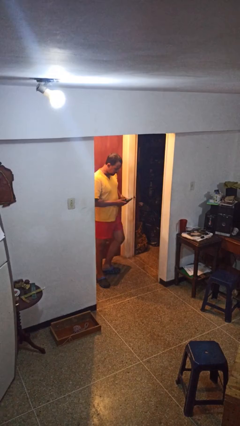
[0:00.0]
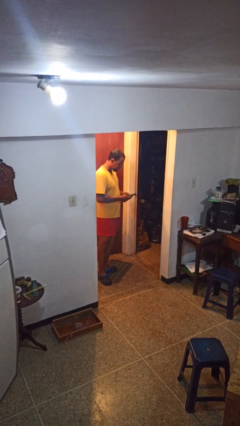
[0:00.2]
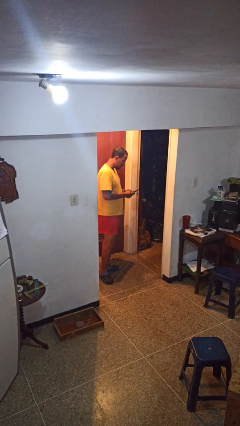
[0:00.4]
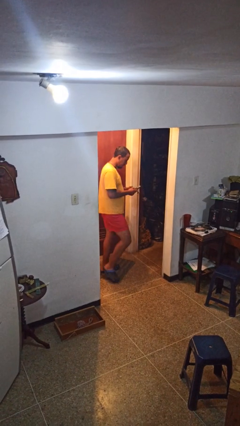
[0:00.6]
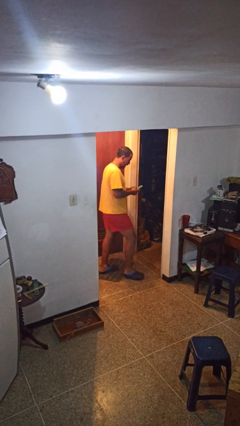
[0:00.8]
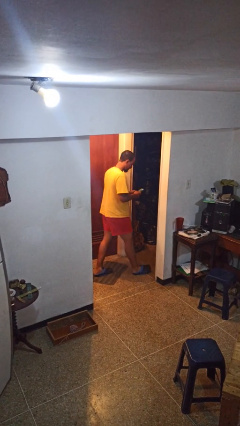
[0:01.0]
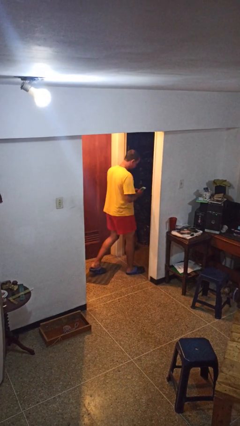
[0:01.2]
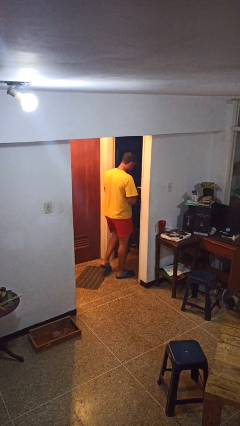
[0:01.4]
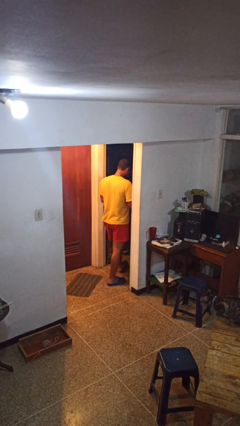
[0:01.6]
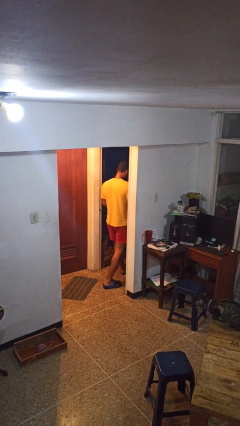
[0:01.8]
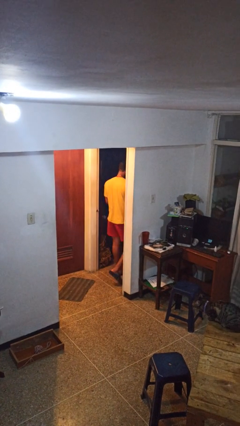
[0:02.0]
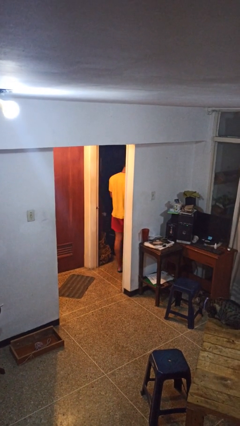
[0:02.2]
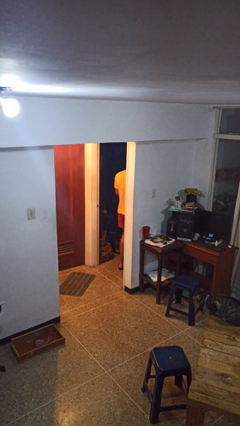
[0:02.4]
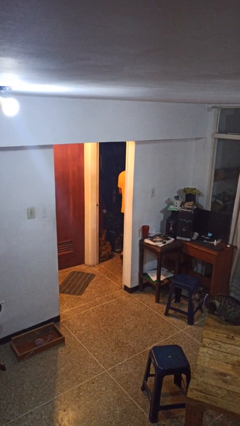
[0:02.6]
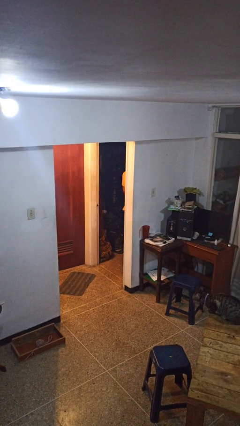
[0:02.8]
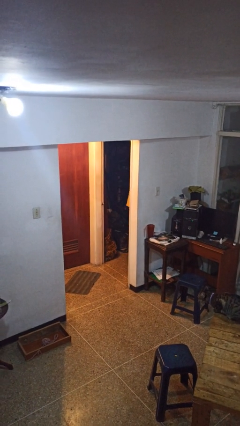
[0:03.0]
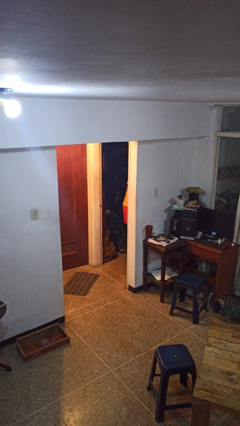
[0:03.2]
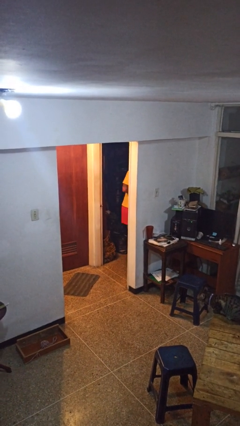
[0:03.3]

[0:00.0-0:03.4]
person exits scene through structure

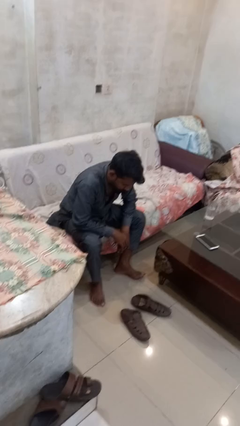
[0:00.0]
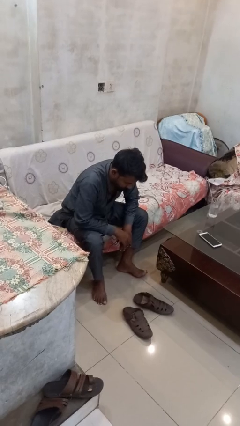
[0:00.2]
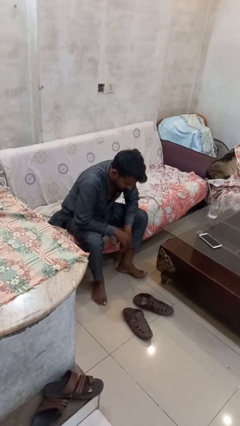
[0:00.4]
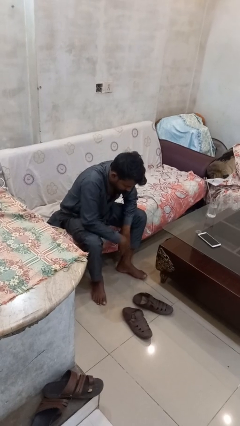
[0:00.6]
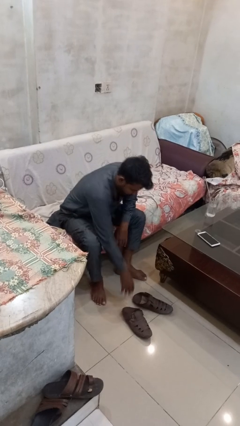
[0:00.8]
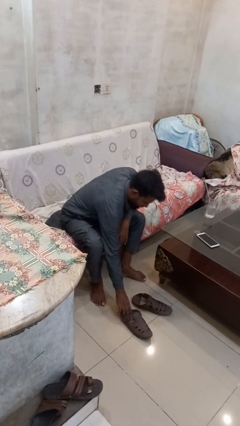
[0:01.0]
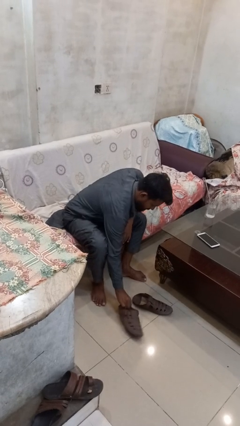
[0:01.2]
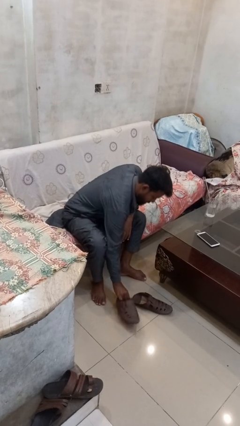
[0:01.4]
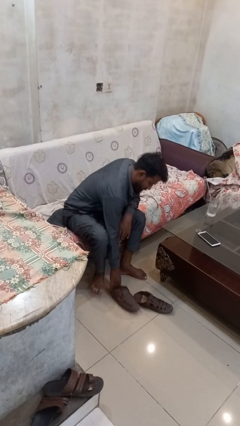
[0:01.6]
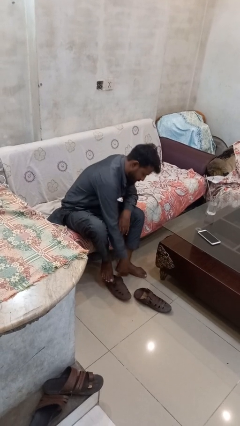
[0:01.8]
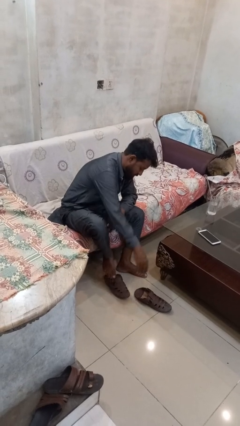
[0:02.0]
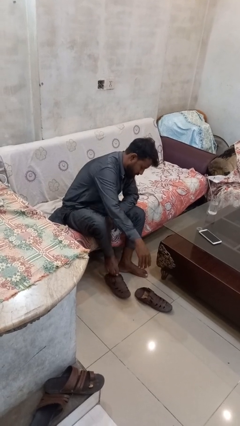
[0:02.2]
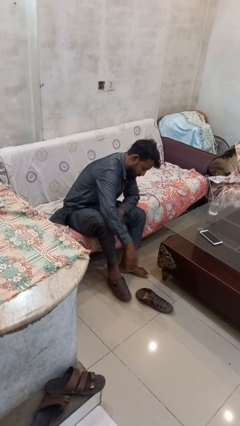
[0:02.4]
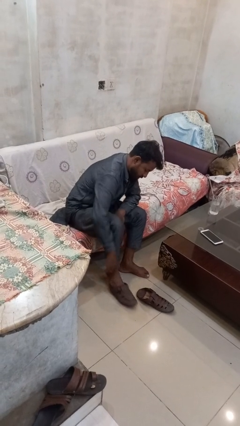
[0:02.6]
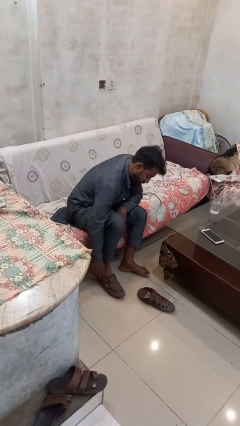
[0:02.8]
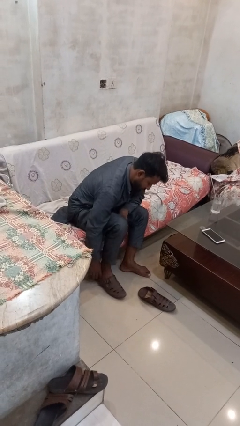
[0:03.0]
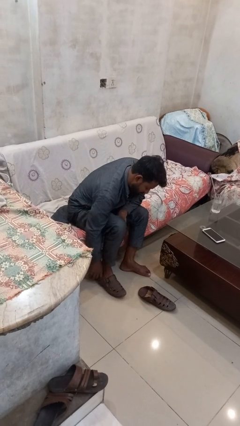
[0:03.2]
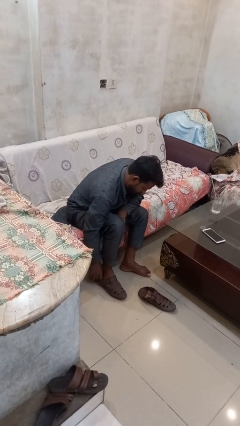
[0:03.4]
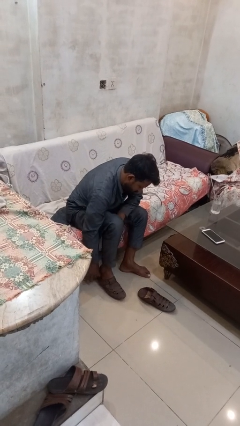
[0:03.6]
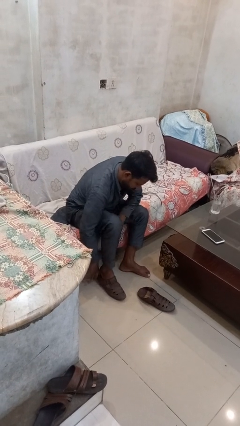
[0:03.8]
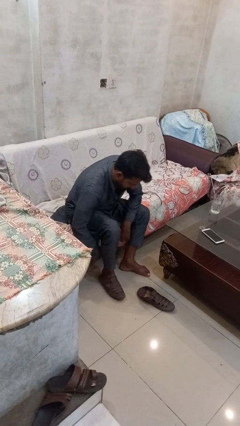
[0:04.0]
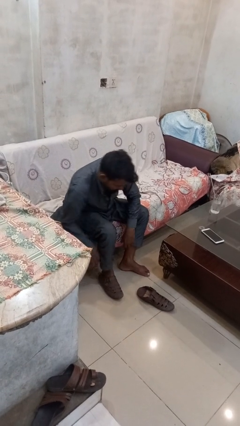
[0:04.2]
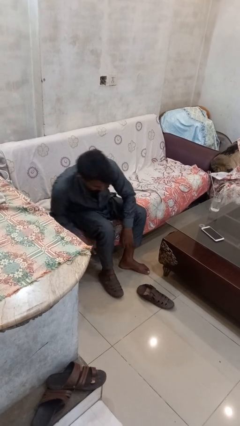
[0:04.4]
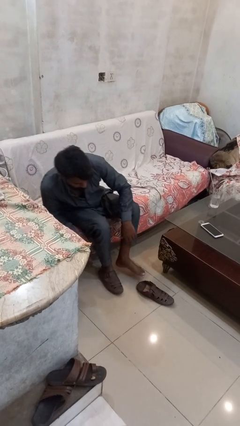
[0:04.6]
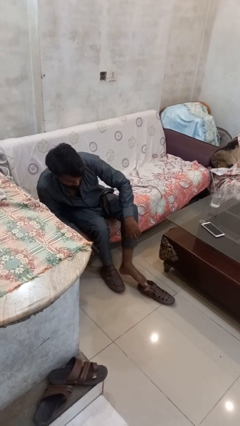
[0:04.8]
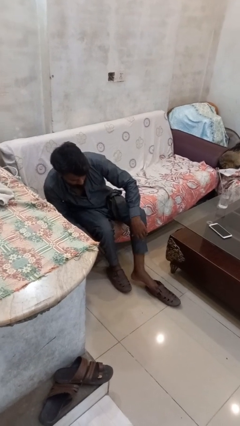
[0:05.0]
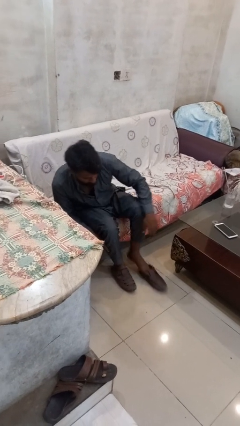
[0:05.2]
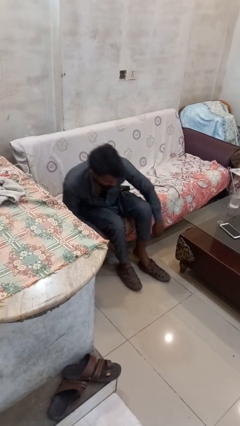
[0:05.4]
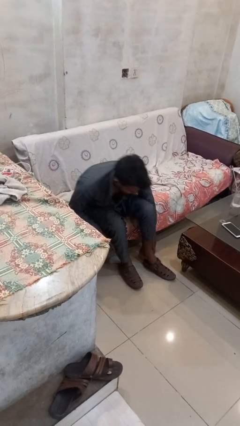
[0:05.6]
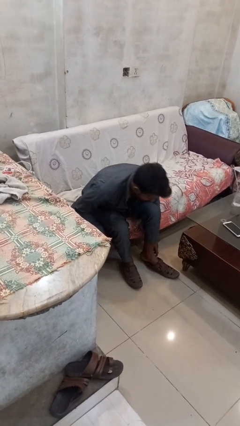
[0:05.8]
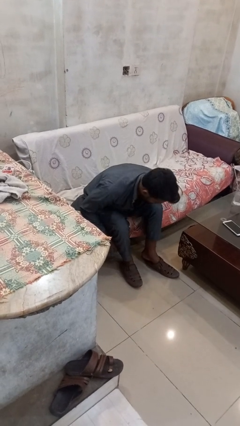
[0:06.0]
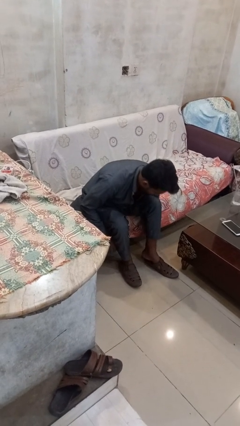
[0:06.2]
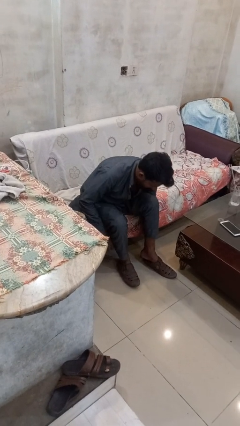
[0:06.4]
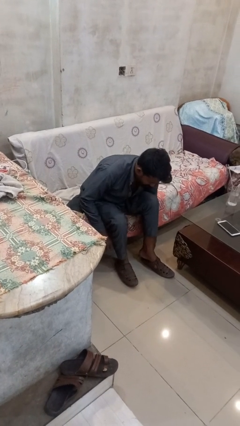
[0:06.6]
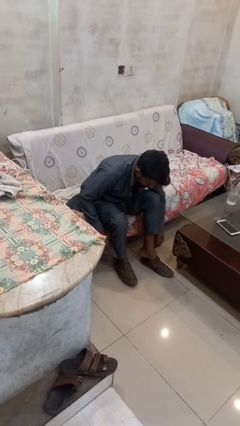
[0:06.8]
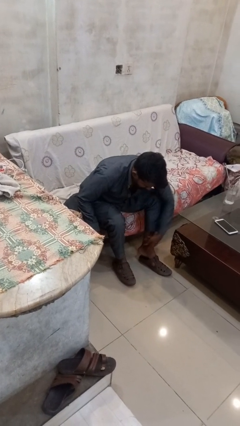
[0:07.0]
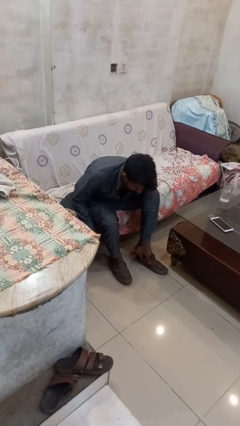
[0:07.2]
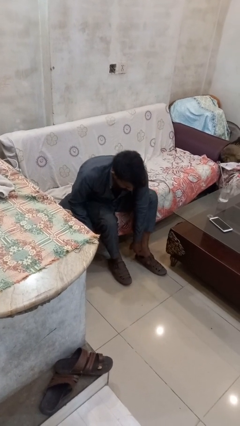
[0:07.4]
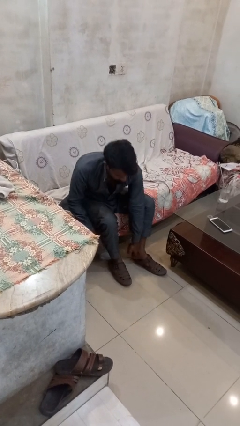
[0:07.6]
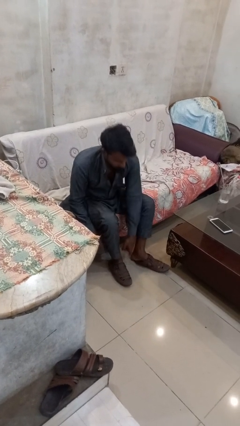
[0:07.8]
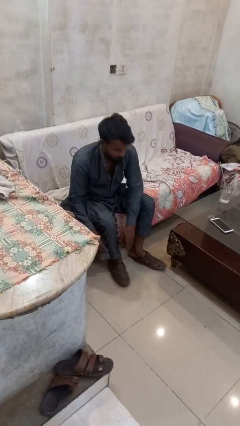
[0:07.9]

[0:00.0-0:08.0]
person puts on shoes

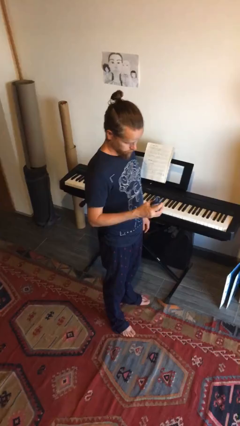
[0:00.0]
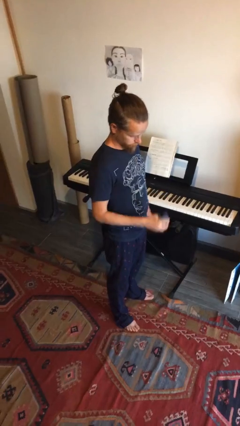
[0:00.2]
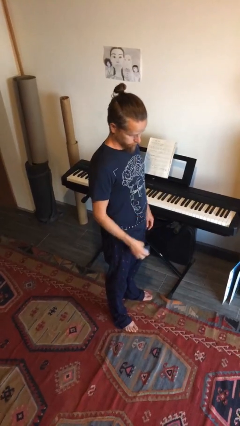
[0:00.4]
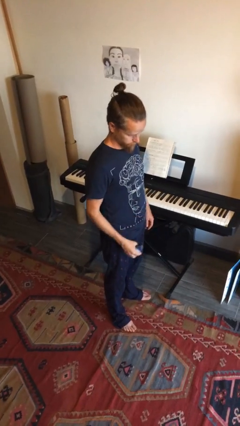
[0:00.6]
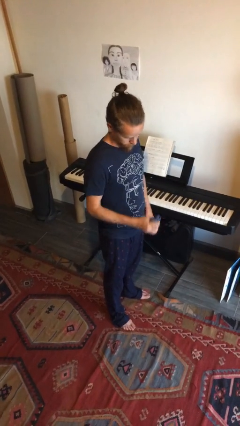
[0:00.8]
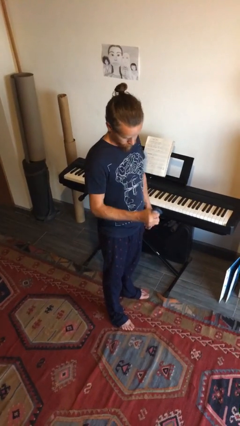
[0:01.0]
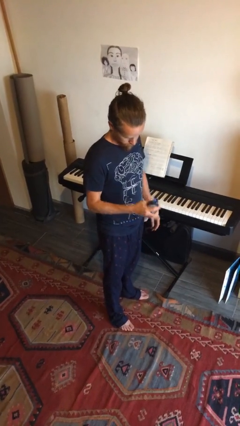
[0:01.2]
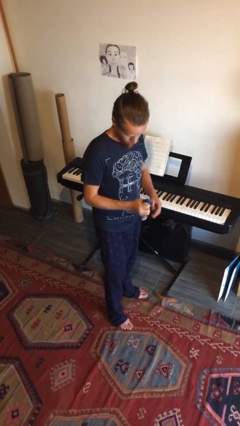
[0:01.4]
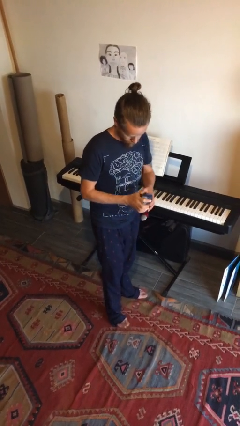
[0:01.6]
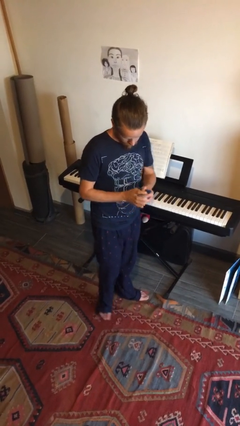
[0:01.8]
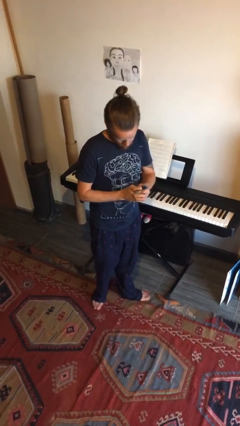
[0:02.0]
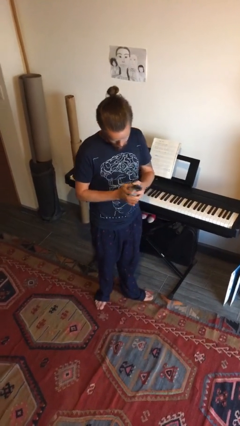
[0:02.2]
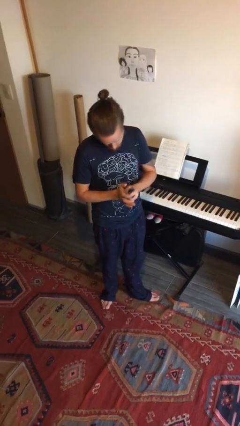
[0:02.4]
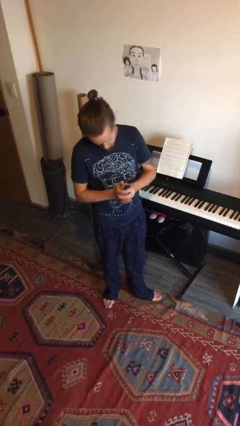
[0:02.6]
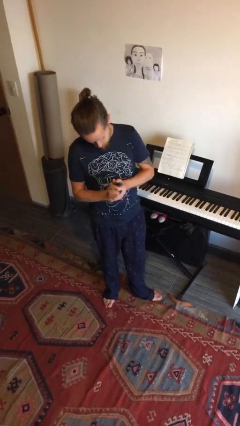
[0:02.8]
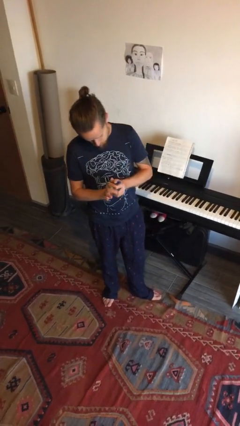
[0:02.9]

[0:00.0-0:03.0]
person squeezes object

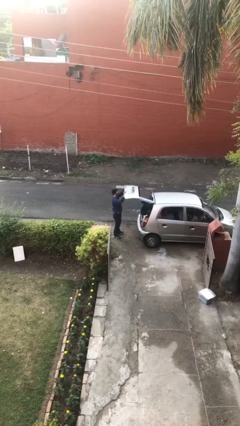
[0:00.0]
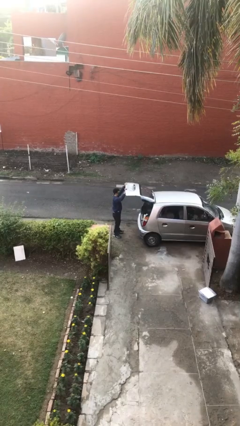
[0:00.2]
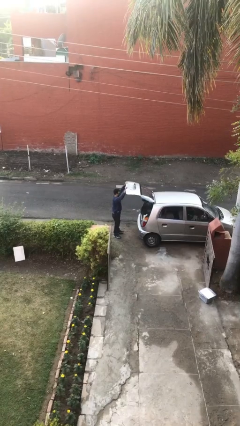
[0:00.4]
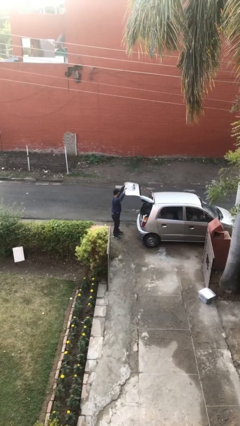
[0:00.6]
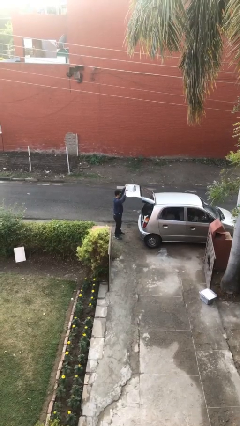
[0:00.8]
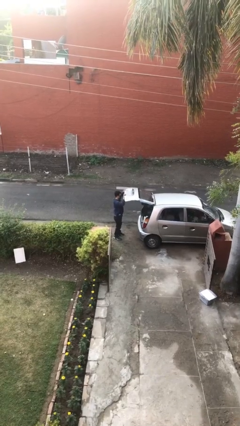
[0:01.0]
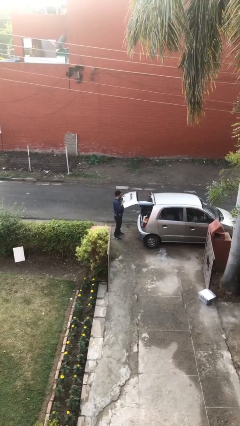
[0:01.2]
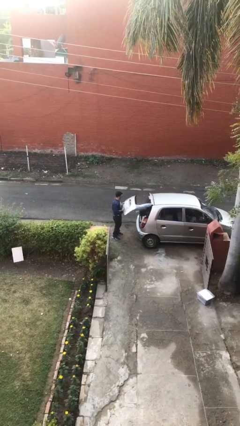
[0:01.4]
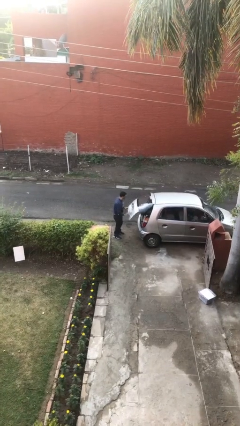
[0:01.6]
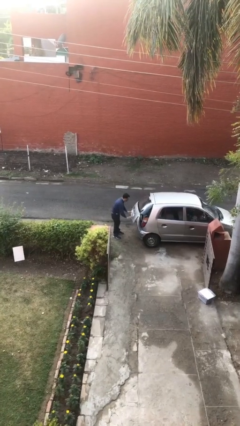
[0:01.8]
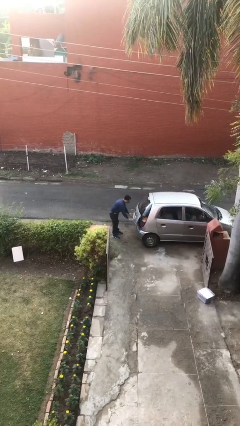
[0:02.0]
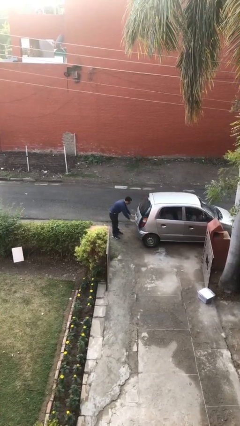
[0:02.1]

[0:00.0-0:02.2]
person closes car trunk

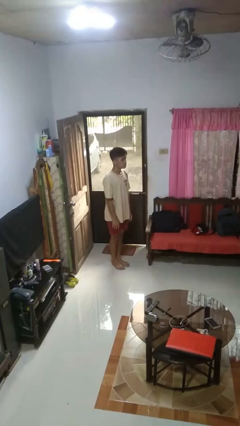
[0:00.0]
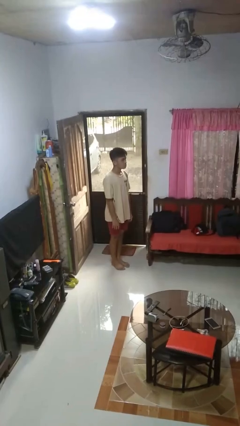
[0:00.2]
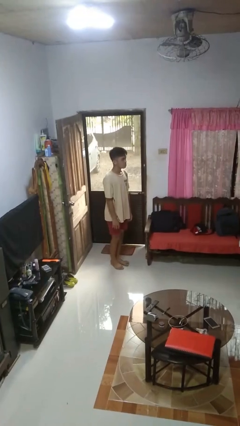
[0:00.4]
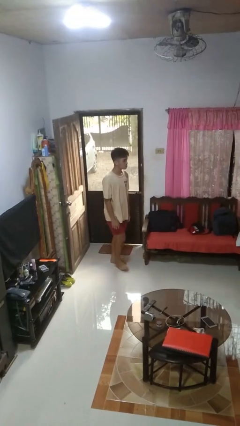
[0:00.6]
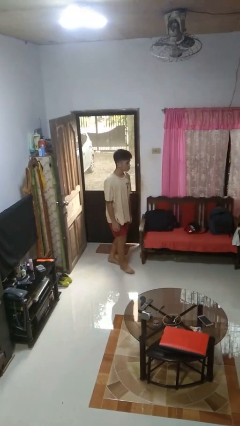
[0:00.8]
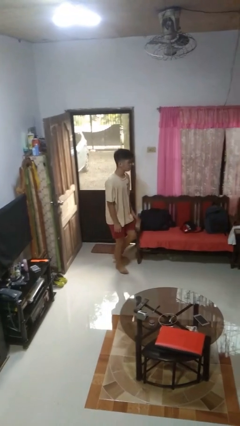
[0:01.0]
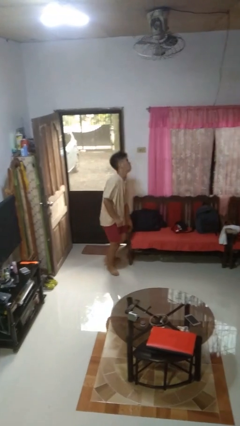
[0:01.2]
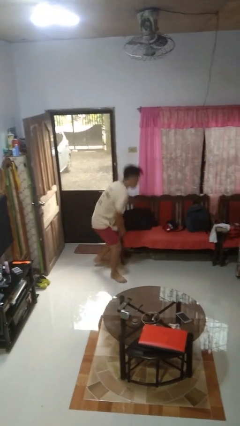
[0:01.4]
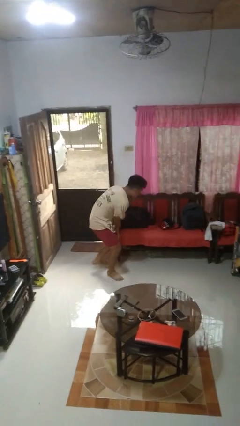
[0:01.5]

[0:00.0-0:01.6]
person trips on object on floor
